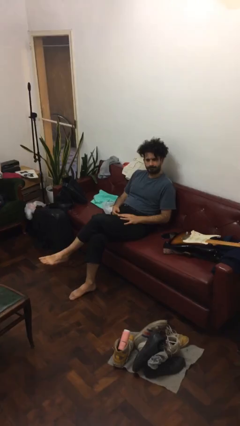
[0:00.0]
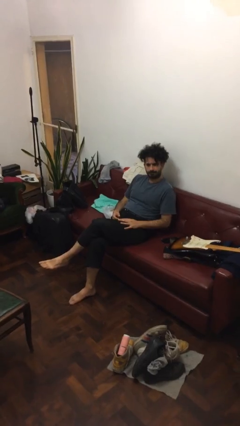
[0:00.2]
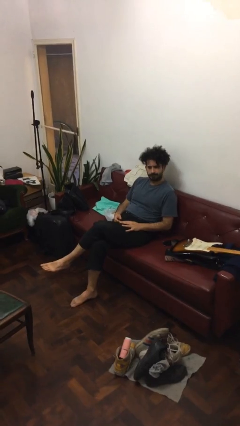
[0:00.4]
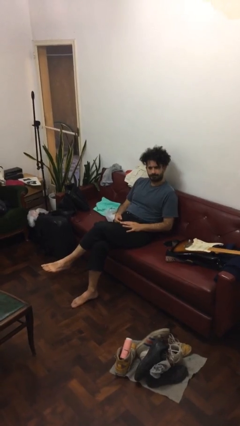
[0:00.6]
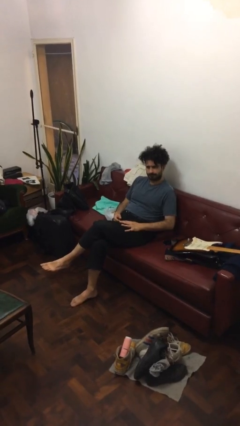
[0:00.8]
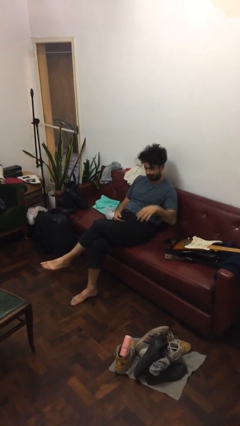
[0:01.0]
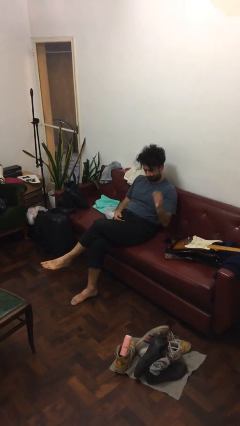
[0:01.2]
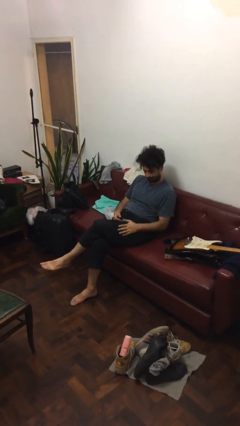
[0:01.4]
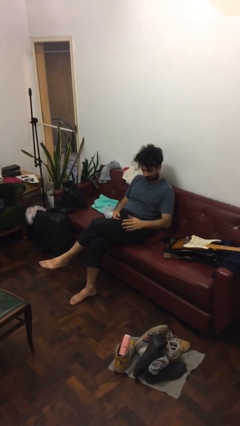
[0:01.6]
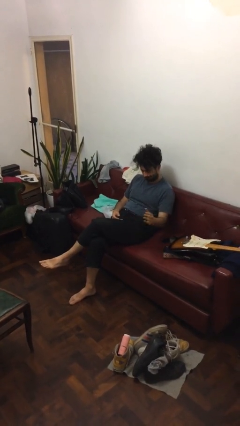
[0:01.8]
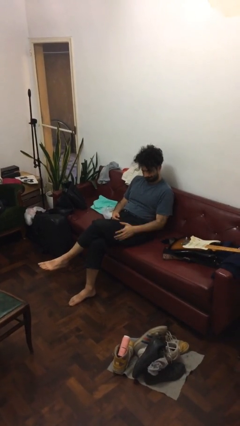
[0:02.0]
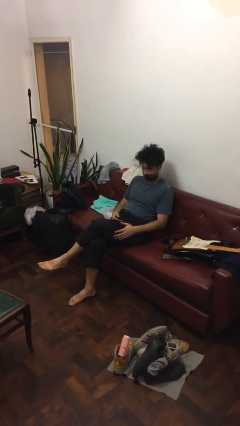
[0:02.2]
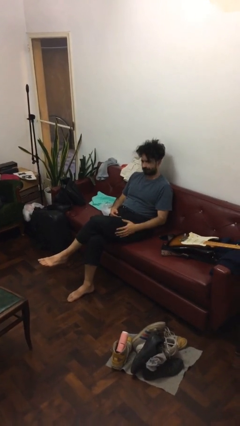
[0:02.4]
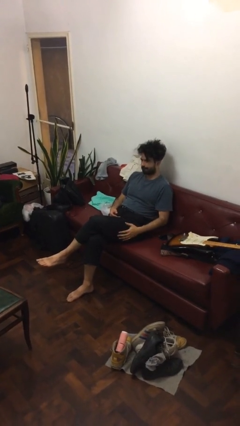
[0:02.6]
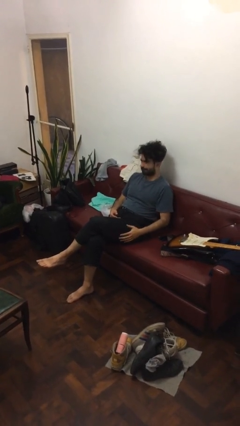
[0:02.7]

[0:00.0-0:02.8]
person slaps hands on thighs

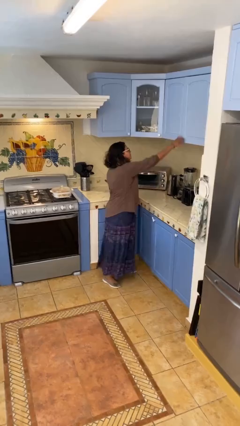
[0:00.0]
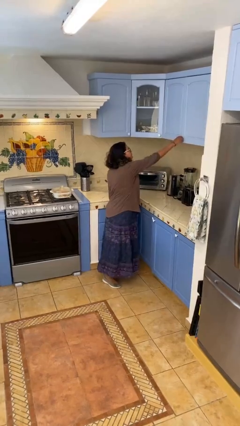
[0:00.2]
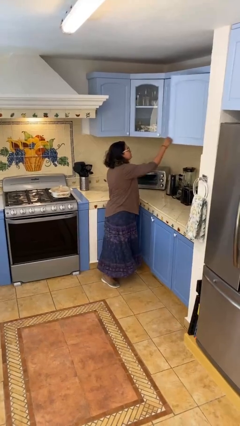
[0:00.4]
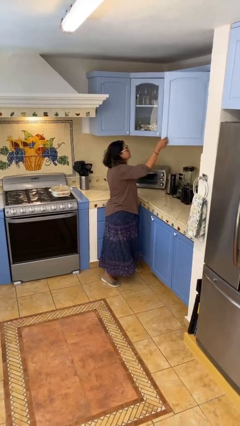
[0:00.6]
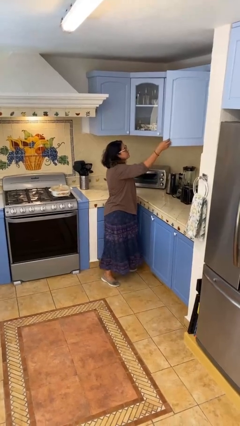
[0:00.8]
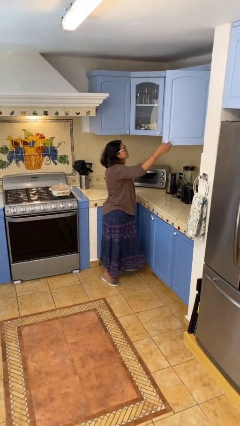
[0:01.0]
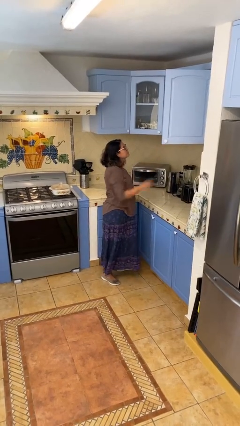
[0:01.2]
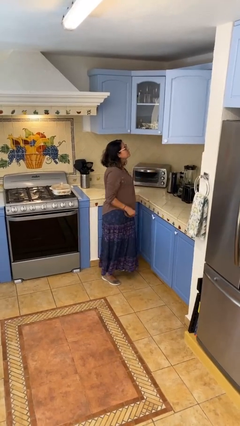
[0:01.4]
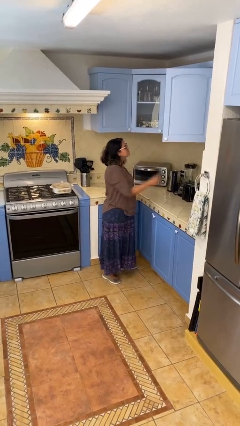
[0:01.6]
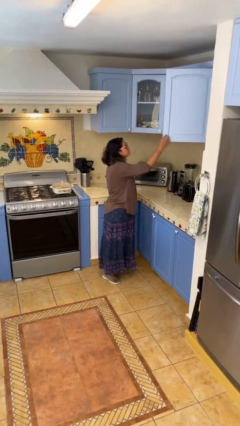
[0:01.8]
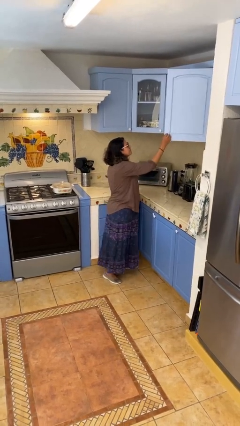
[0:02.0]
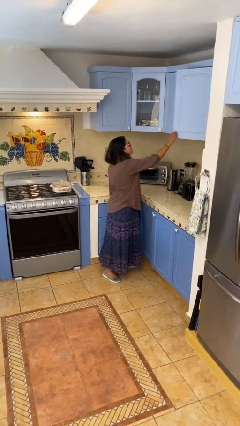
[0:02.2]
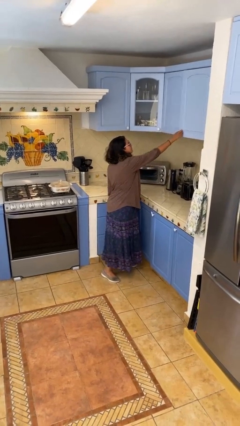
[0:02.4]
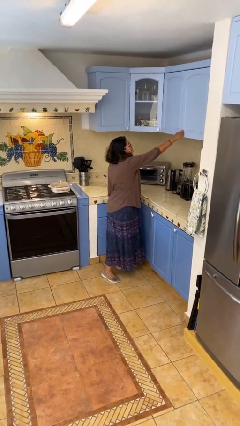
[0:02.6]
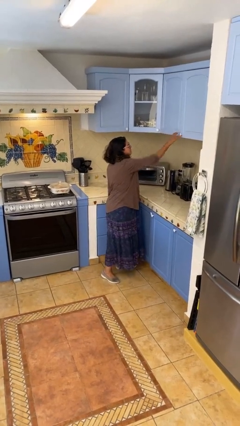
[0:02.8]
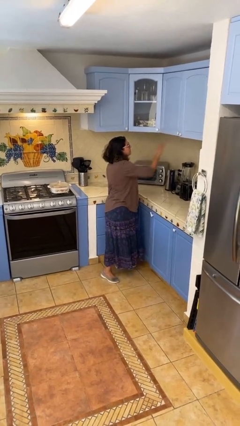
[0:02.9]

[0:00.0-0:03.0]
person closes cabinet

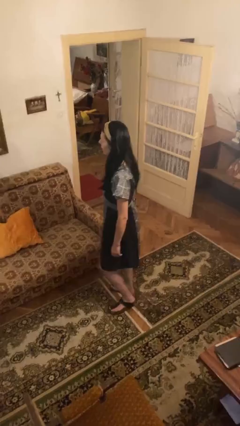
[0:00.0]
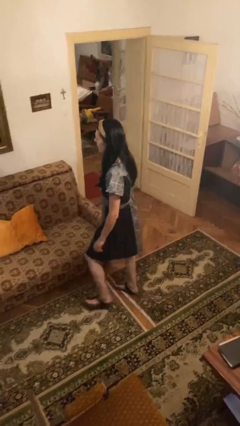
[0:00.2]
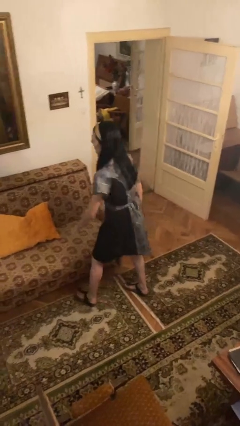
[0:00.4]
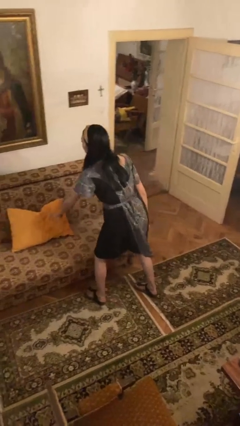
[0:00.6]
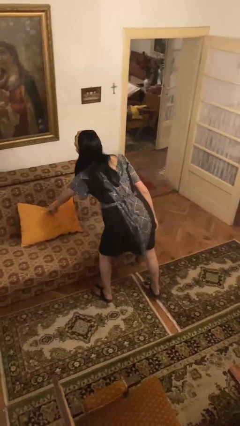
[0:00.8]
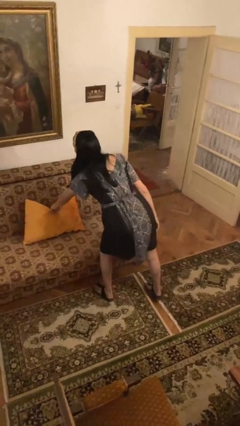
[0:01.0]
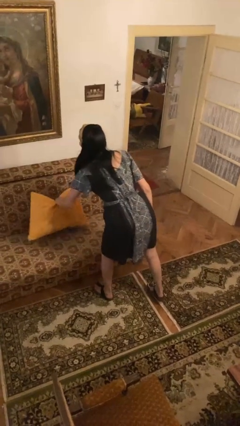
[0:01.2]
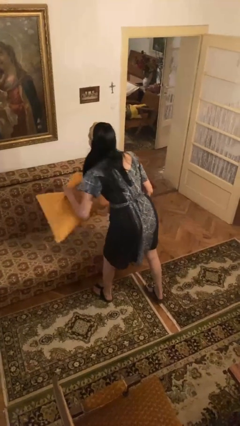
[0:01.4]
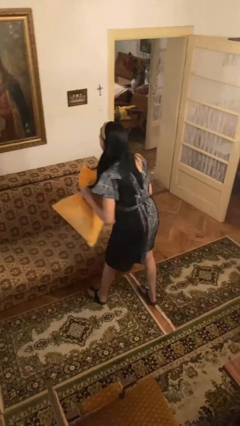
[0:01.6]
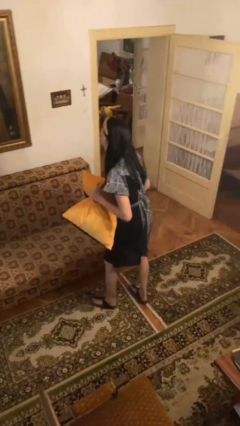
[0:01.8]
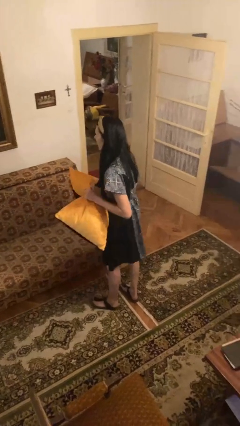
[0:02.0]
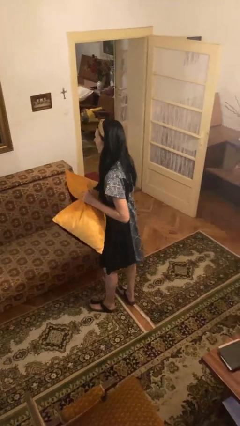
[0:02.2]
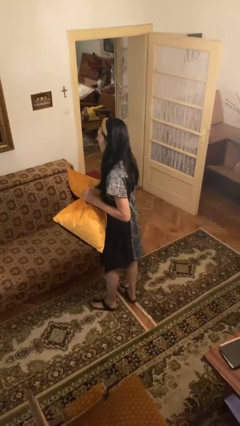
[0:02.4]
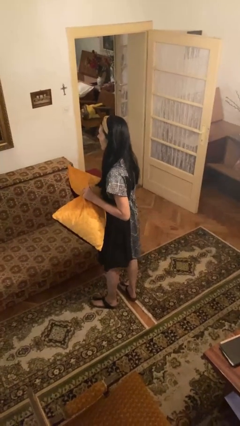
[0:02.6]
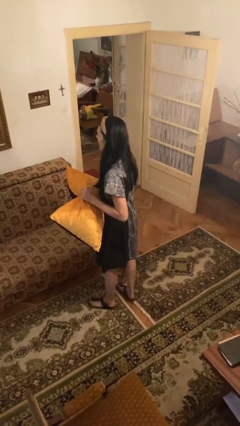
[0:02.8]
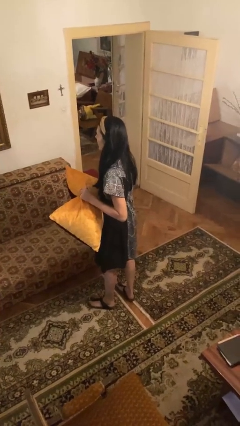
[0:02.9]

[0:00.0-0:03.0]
person picks up object from couch

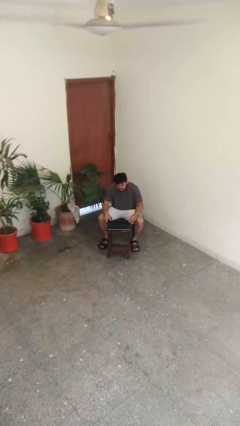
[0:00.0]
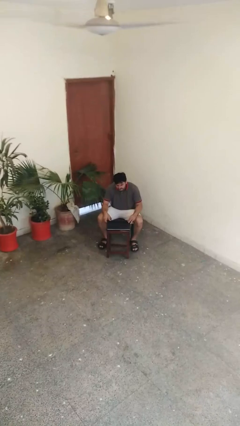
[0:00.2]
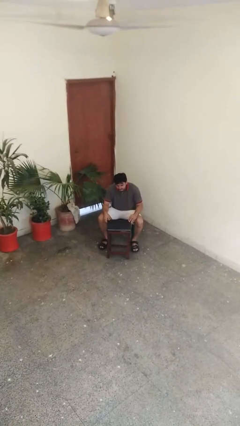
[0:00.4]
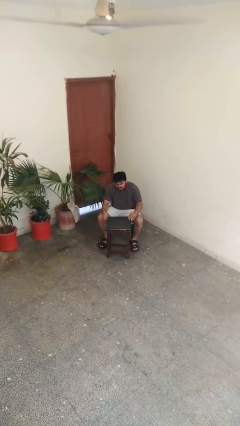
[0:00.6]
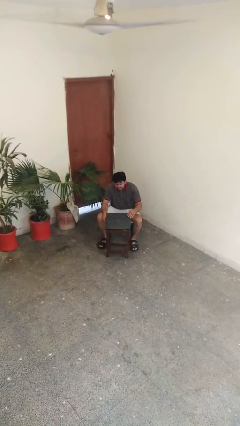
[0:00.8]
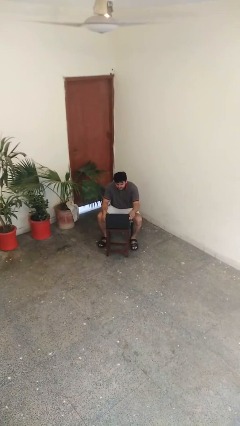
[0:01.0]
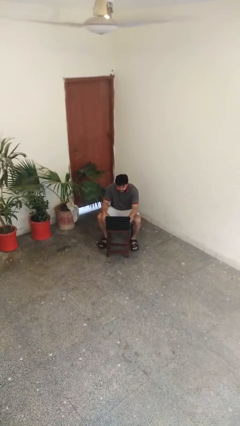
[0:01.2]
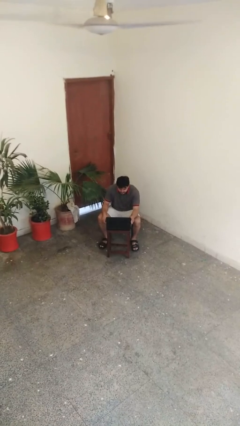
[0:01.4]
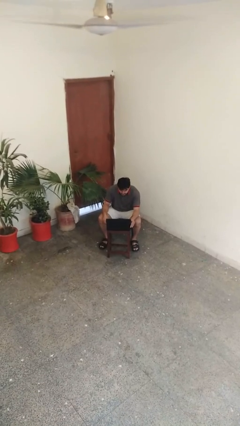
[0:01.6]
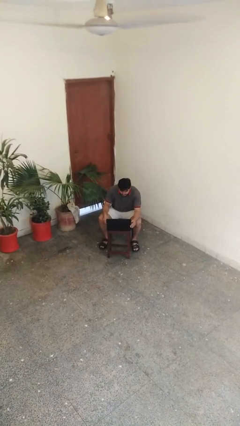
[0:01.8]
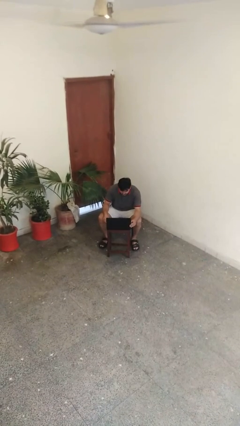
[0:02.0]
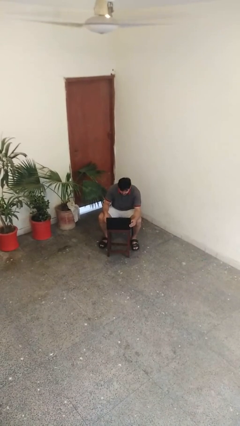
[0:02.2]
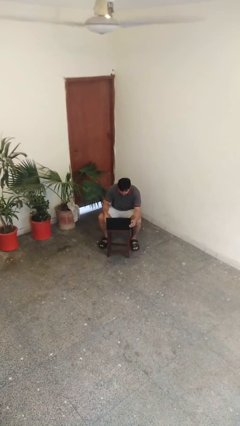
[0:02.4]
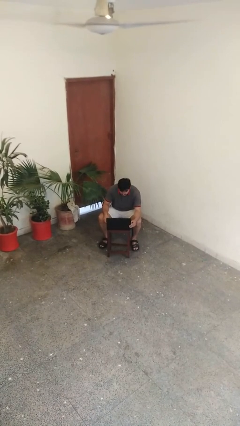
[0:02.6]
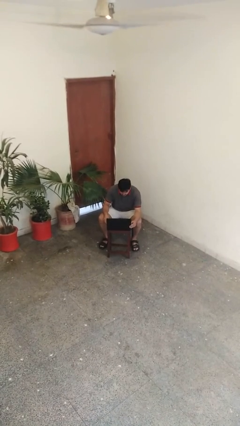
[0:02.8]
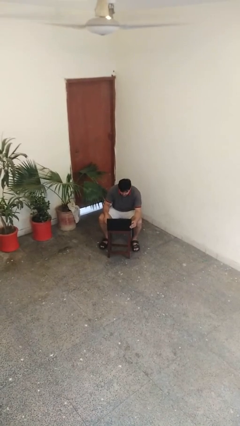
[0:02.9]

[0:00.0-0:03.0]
person opens laptop

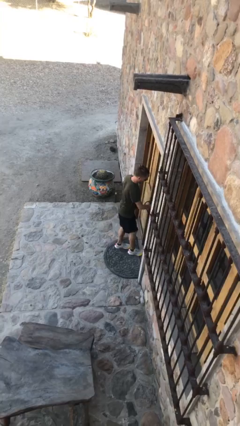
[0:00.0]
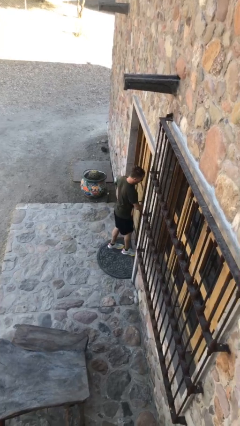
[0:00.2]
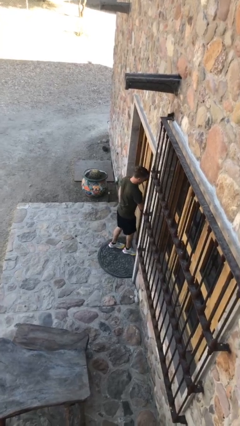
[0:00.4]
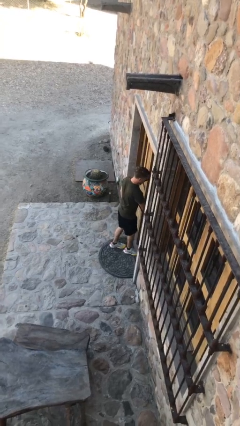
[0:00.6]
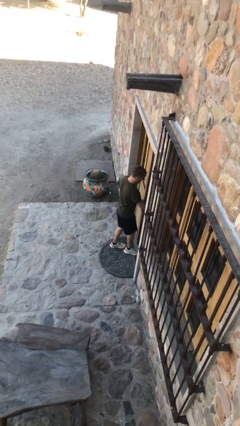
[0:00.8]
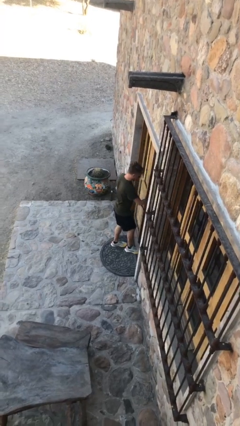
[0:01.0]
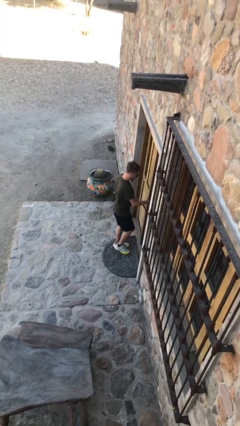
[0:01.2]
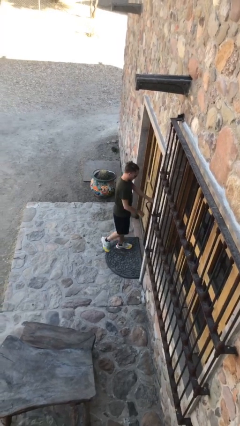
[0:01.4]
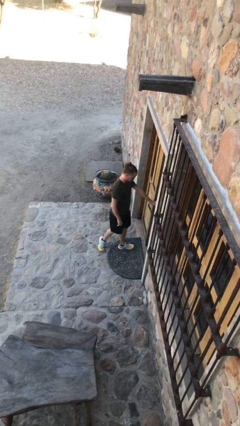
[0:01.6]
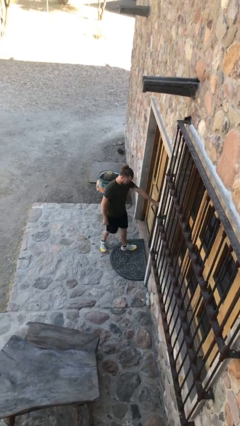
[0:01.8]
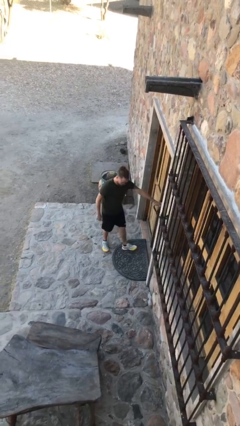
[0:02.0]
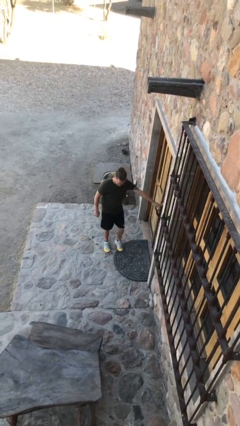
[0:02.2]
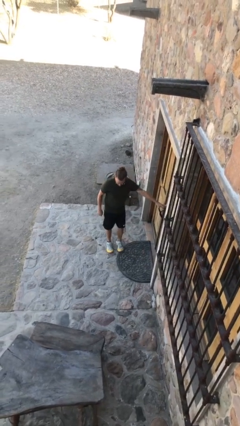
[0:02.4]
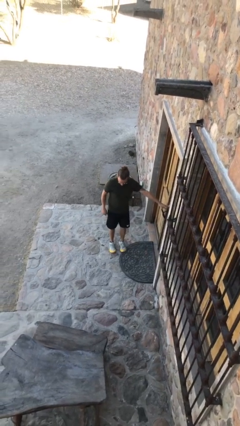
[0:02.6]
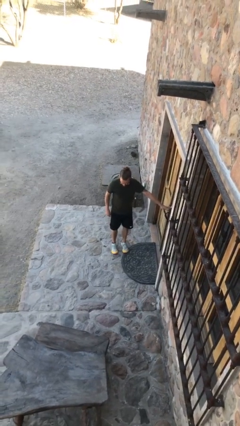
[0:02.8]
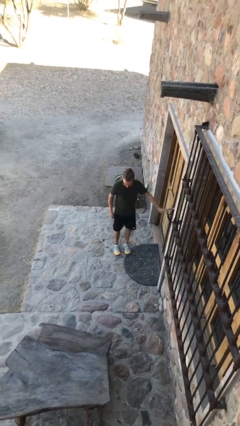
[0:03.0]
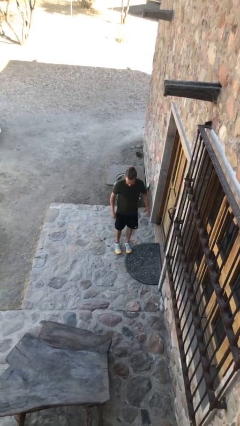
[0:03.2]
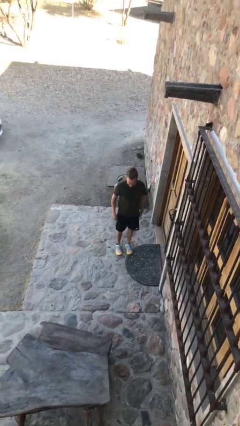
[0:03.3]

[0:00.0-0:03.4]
person closes facility door

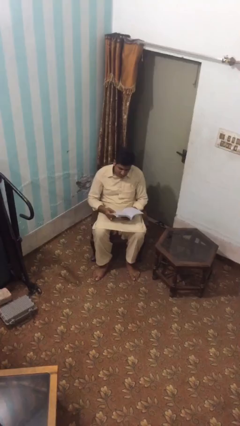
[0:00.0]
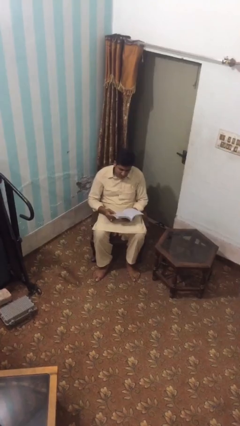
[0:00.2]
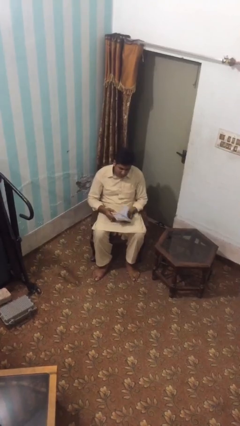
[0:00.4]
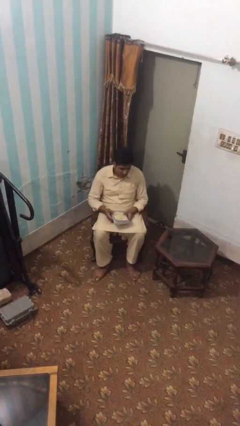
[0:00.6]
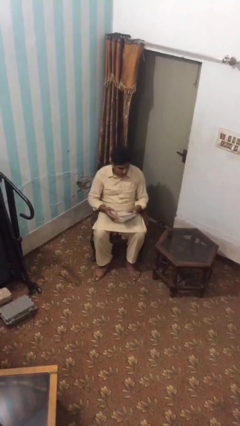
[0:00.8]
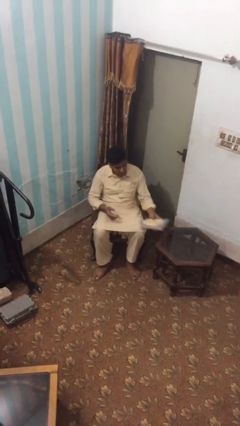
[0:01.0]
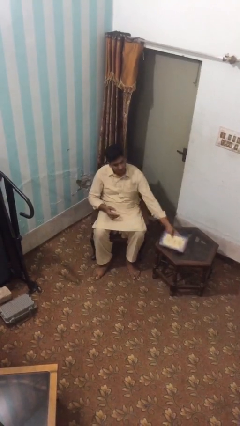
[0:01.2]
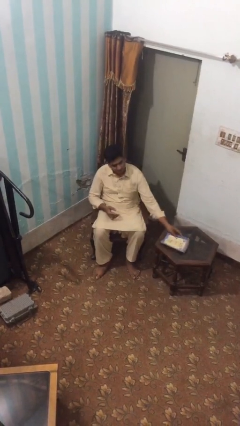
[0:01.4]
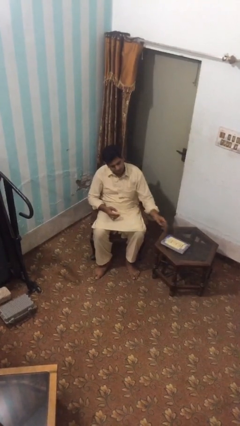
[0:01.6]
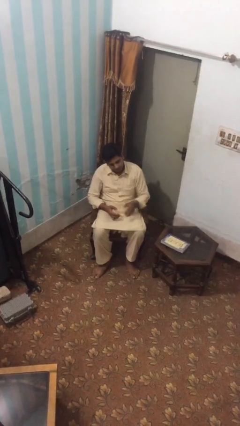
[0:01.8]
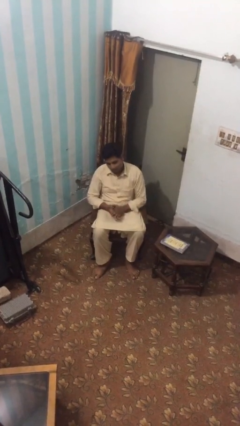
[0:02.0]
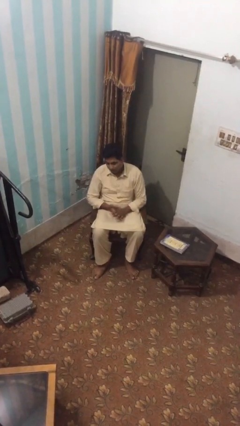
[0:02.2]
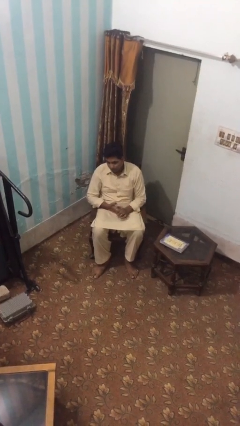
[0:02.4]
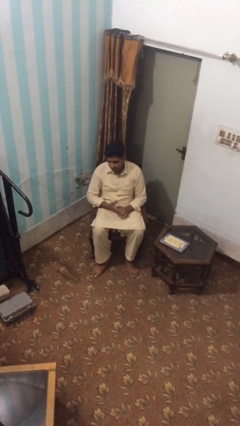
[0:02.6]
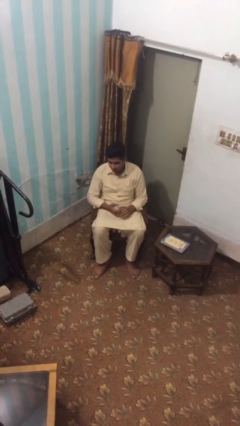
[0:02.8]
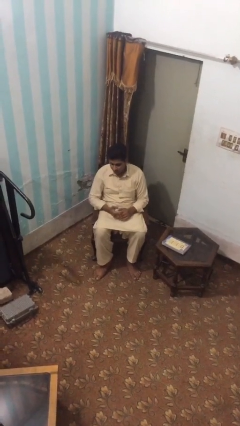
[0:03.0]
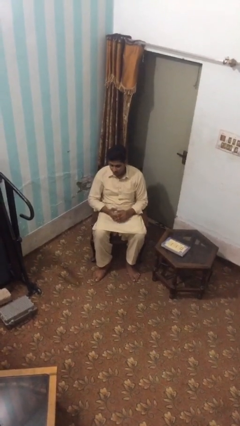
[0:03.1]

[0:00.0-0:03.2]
person puts down object on table
